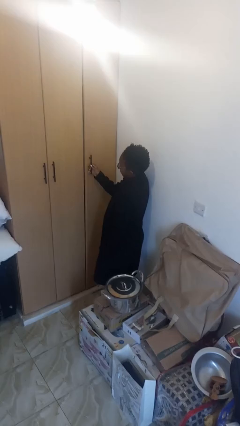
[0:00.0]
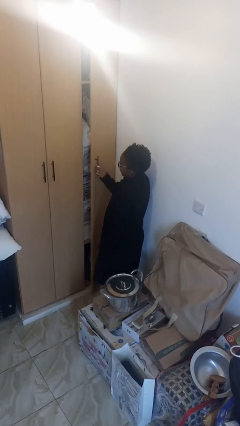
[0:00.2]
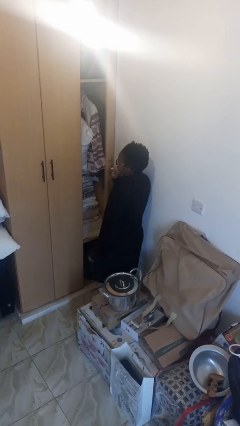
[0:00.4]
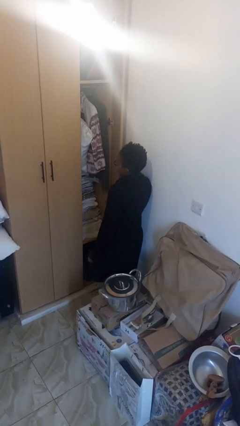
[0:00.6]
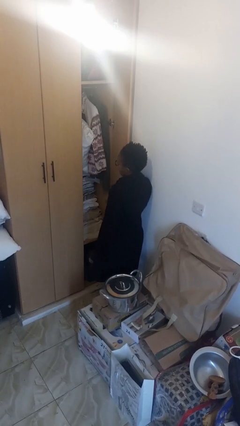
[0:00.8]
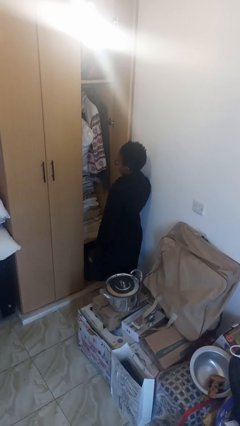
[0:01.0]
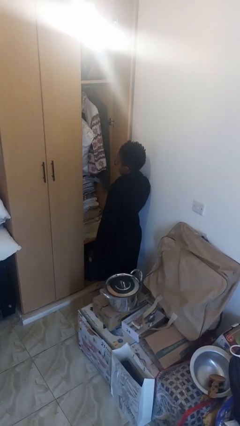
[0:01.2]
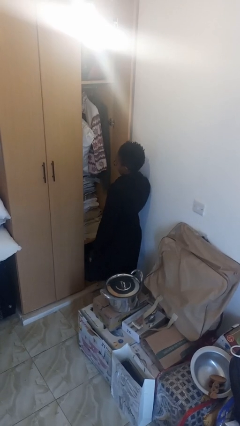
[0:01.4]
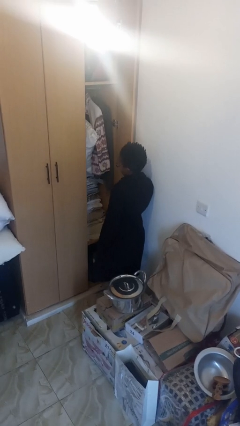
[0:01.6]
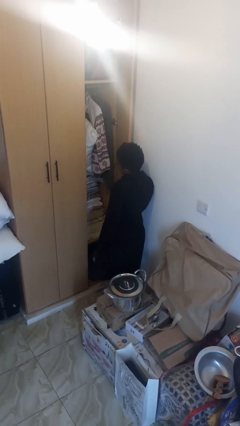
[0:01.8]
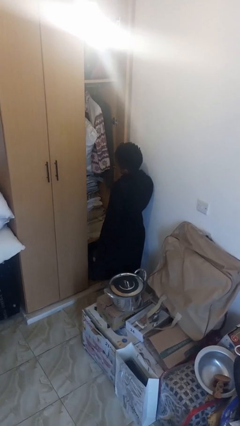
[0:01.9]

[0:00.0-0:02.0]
person opens closet door

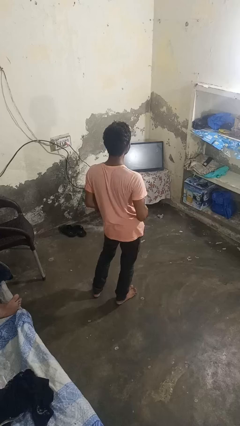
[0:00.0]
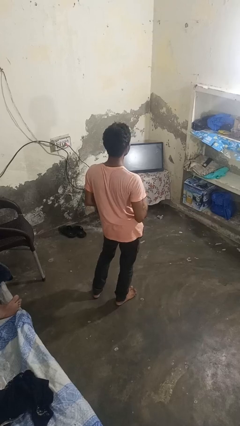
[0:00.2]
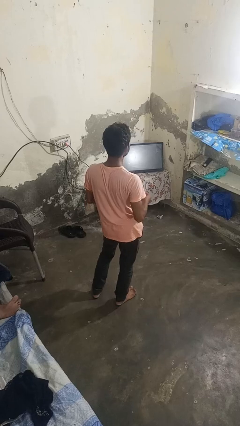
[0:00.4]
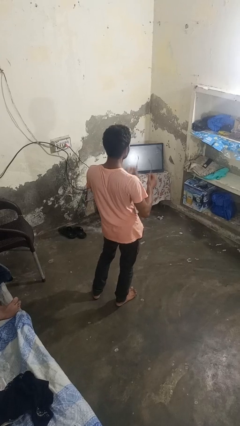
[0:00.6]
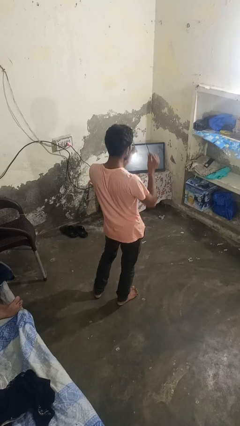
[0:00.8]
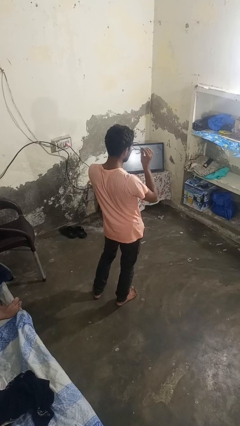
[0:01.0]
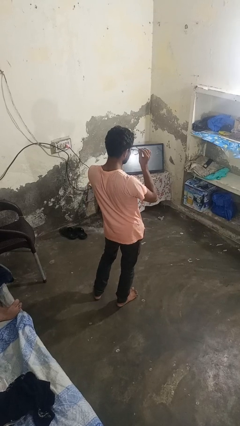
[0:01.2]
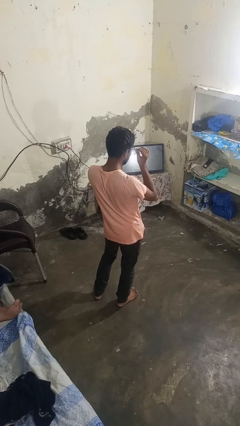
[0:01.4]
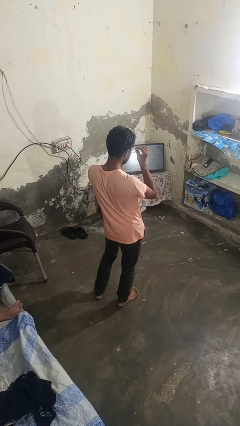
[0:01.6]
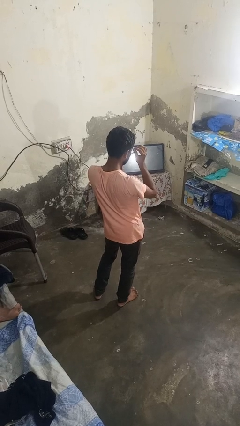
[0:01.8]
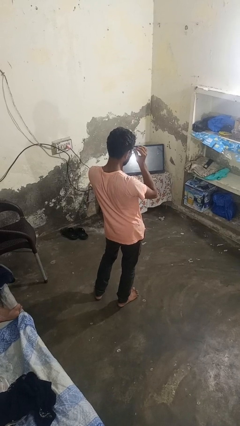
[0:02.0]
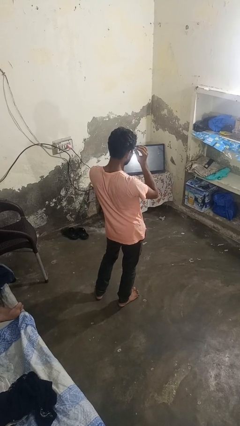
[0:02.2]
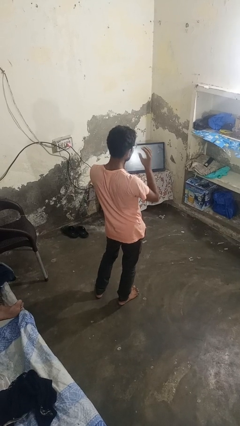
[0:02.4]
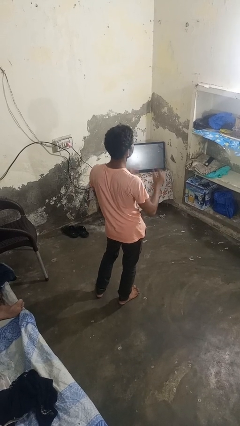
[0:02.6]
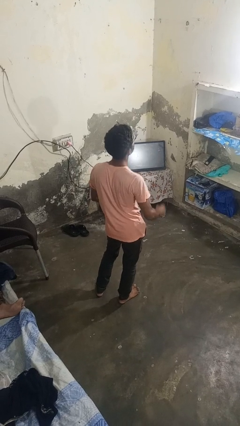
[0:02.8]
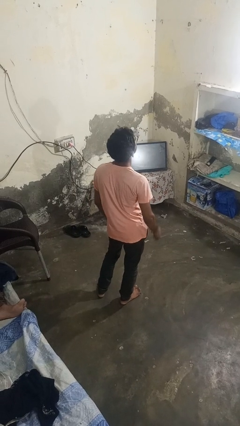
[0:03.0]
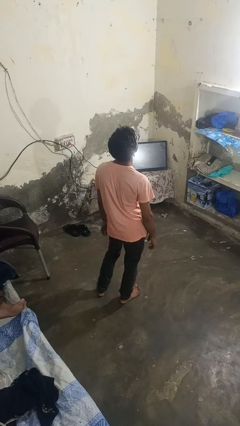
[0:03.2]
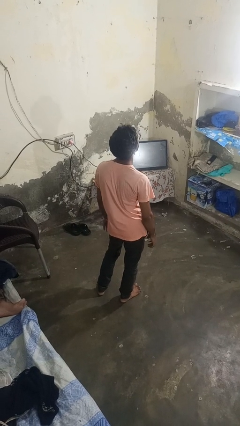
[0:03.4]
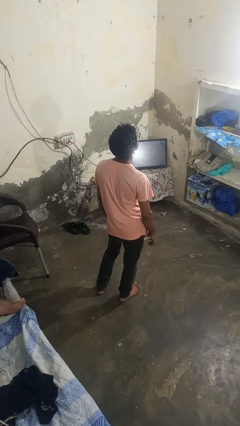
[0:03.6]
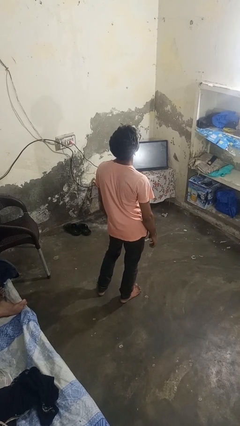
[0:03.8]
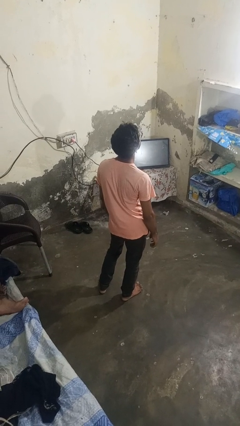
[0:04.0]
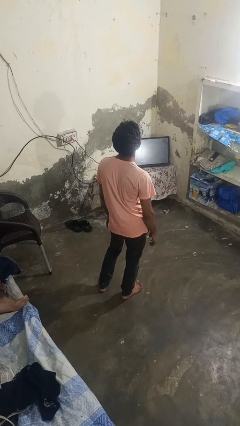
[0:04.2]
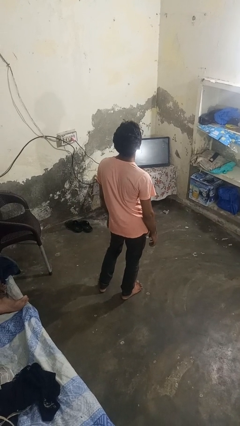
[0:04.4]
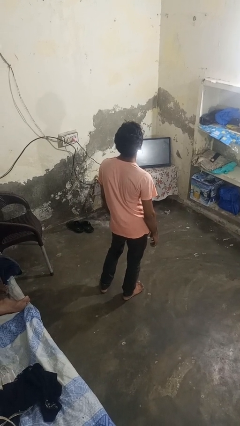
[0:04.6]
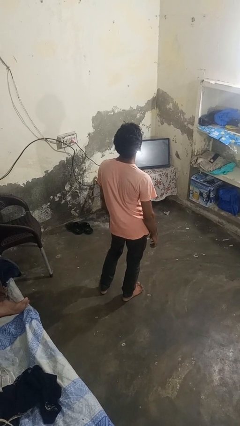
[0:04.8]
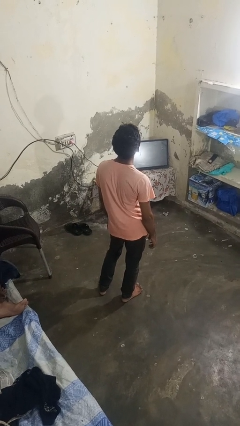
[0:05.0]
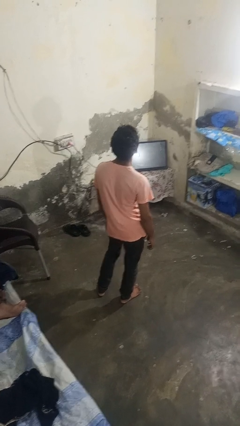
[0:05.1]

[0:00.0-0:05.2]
person puts on glasses

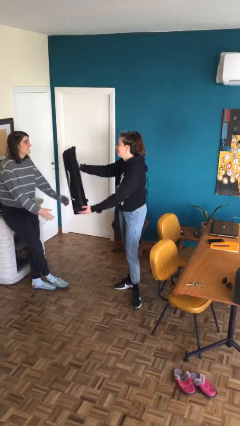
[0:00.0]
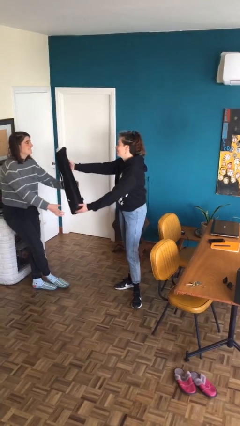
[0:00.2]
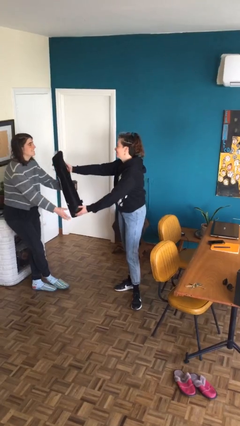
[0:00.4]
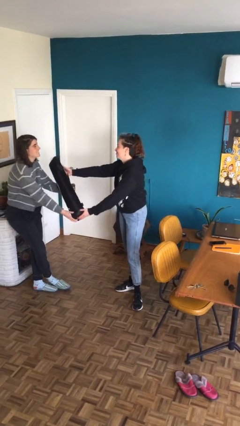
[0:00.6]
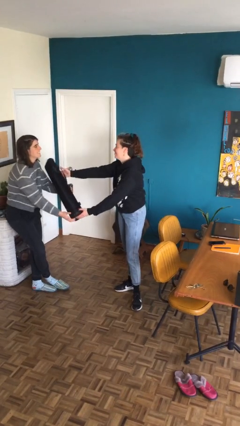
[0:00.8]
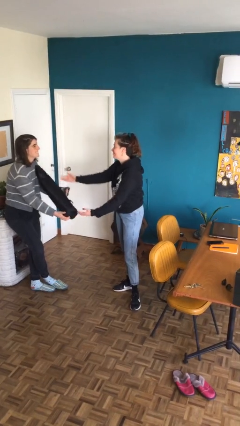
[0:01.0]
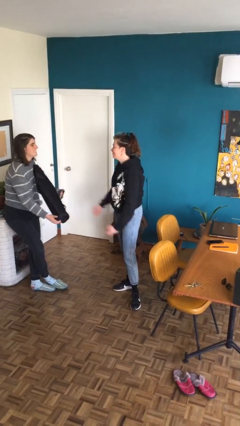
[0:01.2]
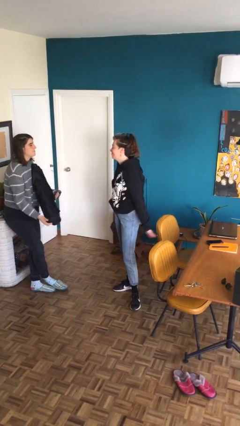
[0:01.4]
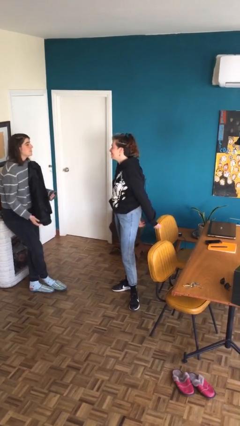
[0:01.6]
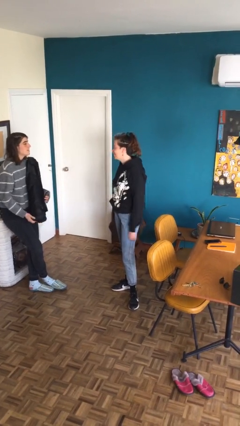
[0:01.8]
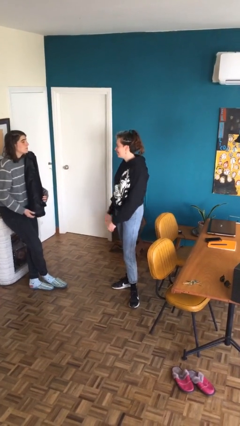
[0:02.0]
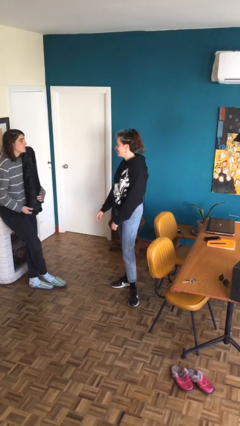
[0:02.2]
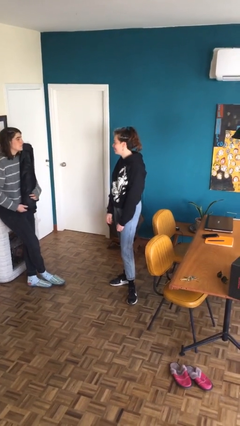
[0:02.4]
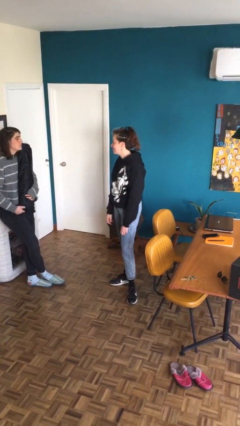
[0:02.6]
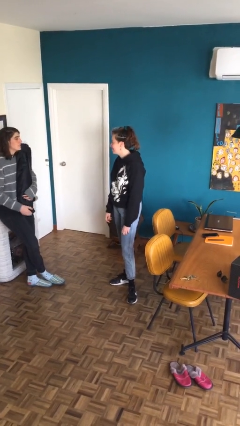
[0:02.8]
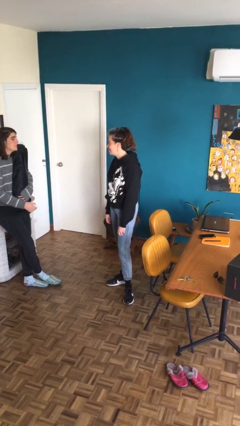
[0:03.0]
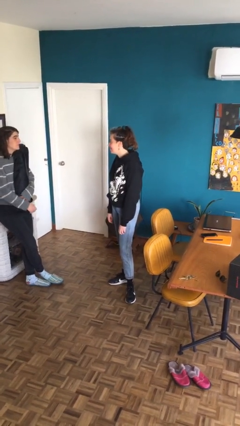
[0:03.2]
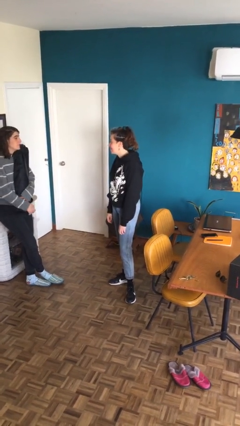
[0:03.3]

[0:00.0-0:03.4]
person transfers object to person

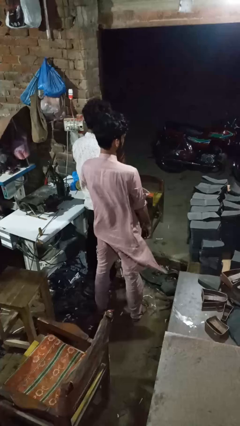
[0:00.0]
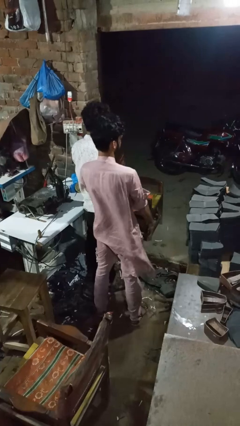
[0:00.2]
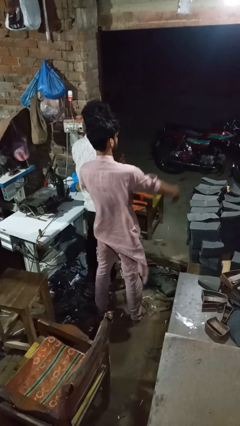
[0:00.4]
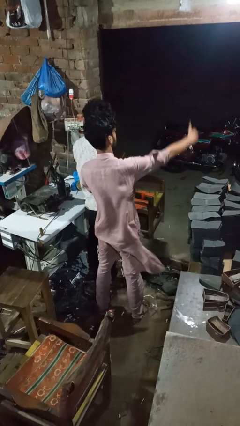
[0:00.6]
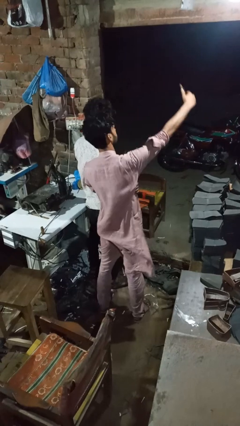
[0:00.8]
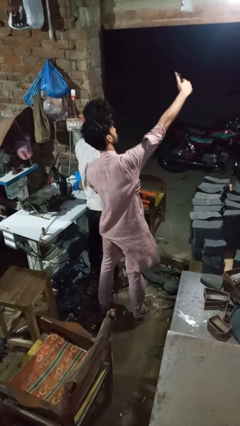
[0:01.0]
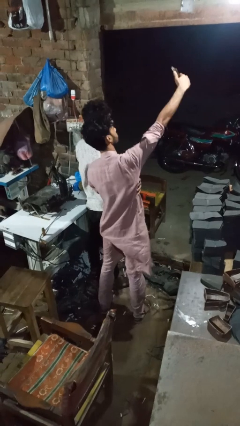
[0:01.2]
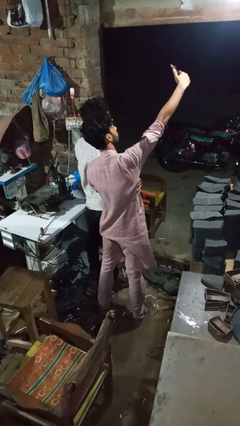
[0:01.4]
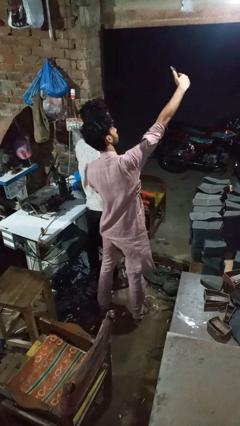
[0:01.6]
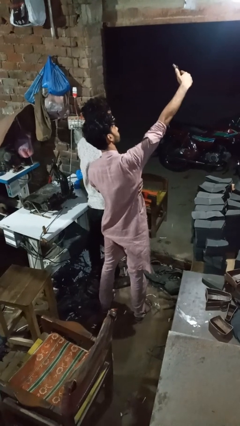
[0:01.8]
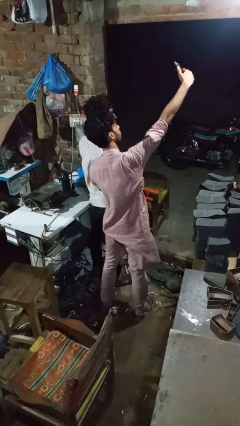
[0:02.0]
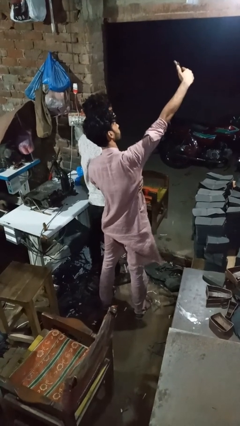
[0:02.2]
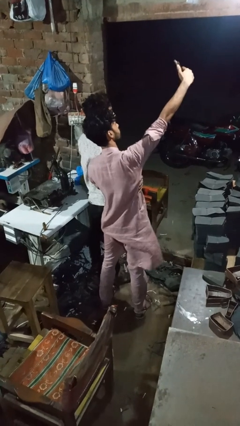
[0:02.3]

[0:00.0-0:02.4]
person tickles person

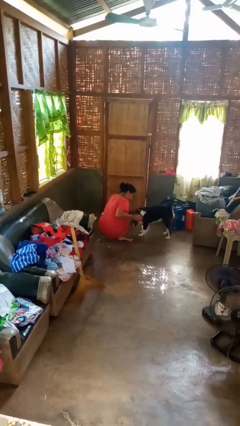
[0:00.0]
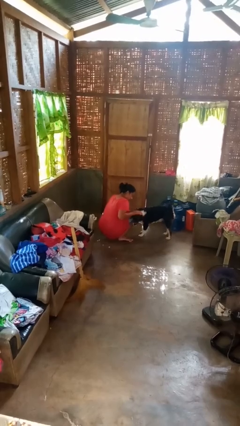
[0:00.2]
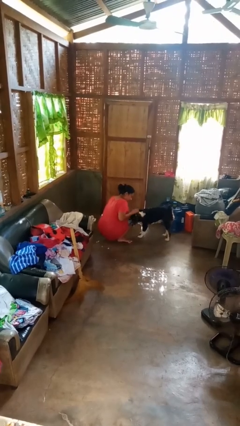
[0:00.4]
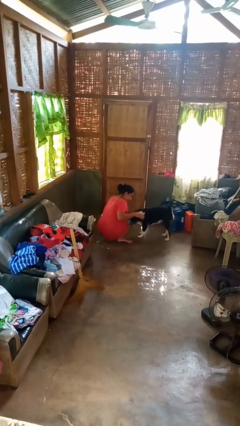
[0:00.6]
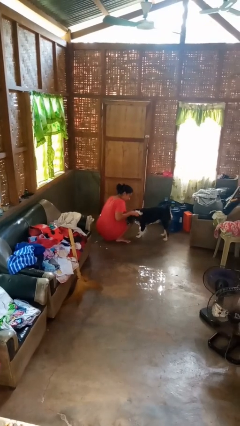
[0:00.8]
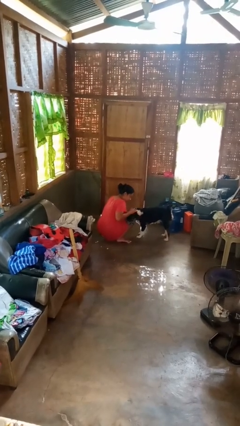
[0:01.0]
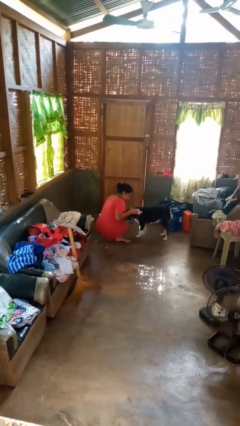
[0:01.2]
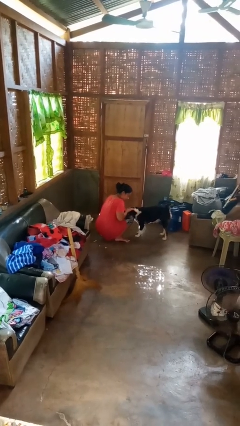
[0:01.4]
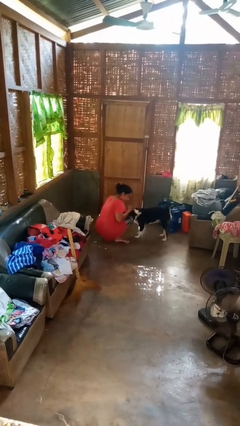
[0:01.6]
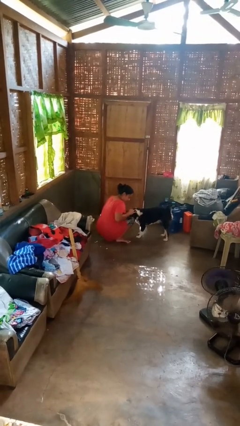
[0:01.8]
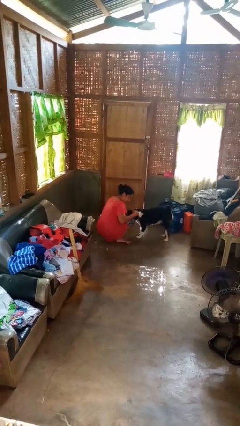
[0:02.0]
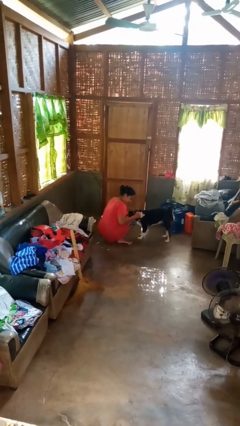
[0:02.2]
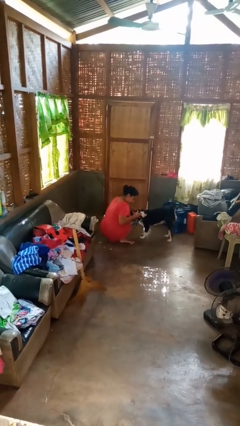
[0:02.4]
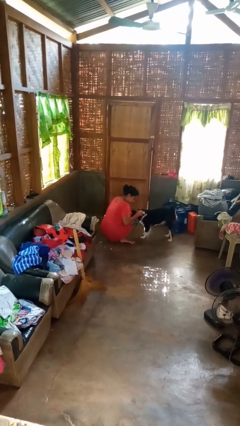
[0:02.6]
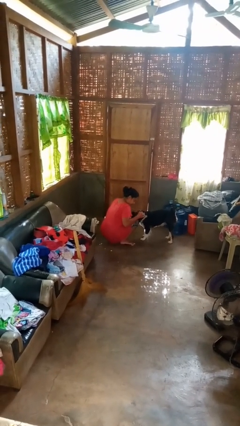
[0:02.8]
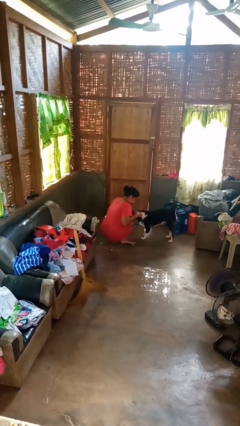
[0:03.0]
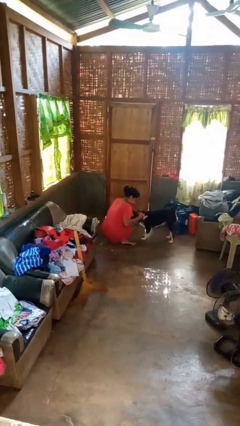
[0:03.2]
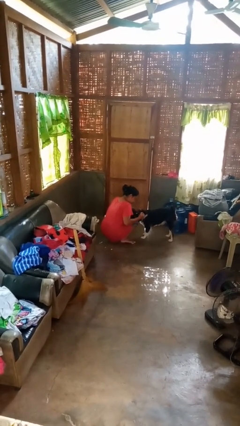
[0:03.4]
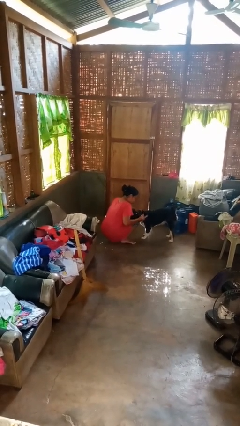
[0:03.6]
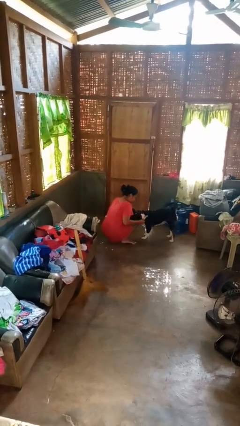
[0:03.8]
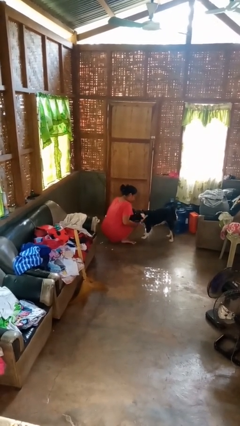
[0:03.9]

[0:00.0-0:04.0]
person pets dog

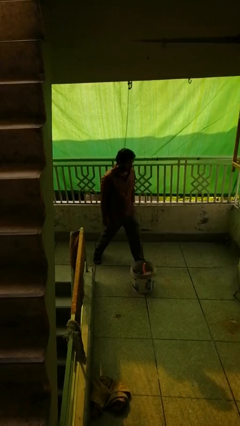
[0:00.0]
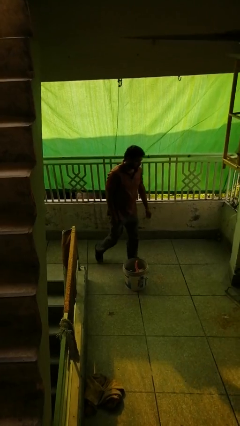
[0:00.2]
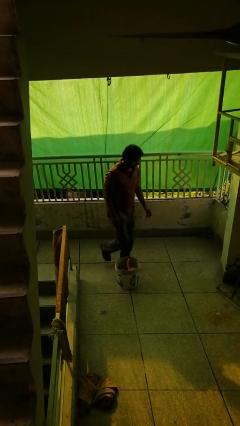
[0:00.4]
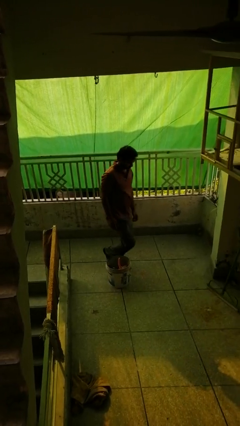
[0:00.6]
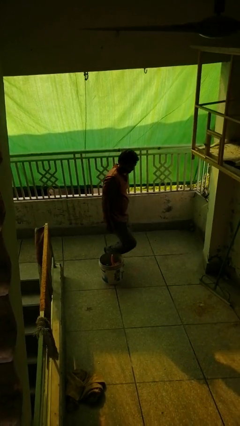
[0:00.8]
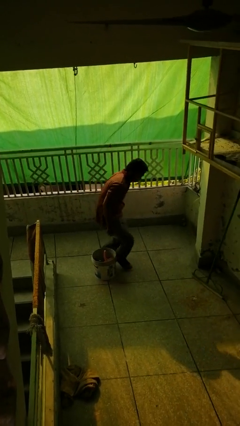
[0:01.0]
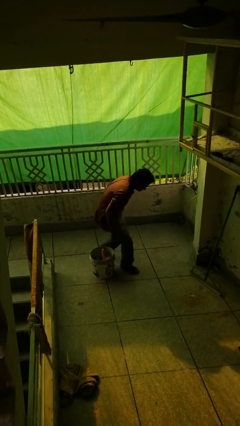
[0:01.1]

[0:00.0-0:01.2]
person trips on object on floor
